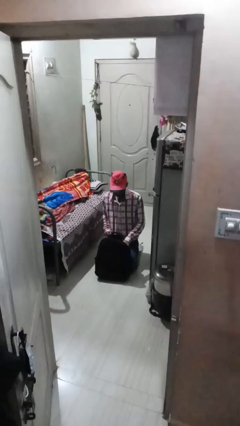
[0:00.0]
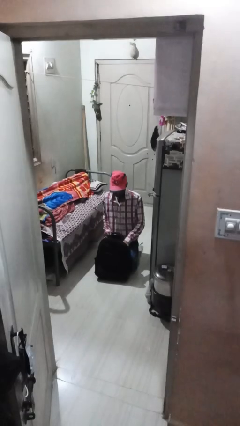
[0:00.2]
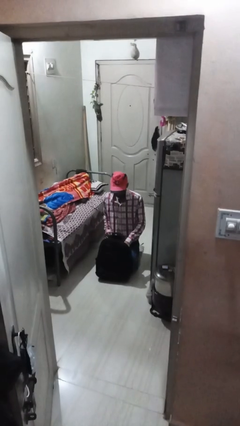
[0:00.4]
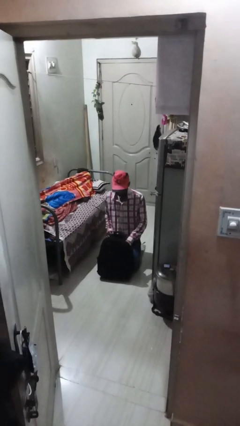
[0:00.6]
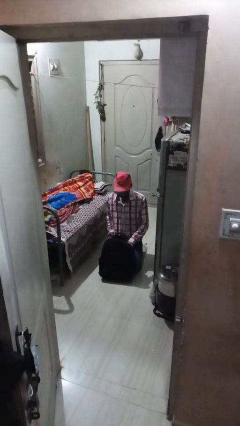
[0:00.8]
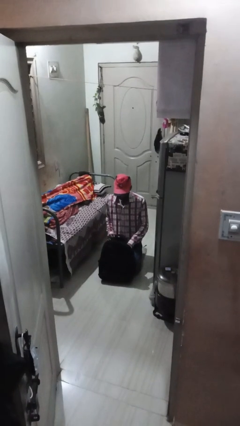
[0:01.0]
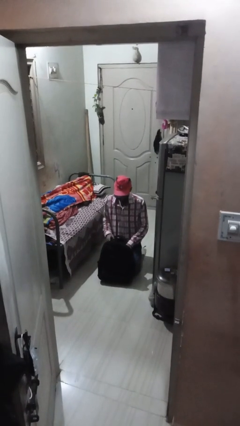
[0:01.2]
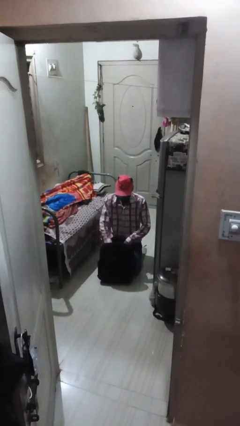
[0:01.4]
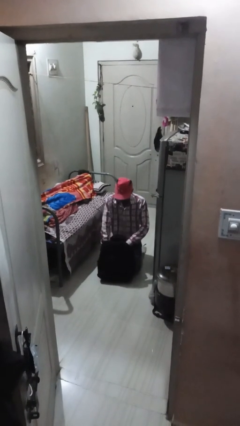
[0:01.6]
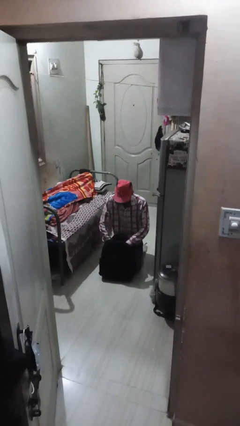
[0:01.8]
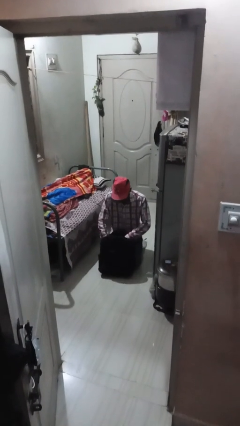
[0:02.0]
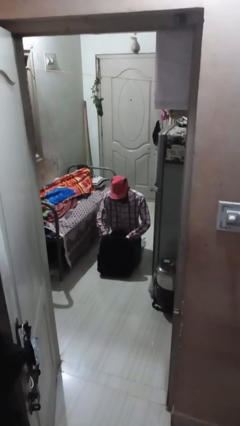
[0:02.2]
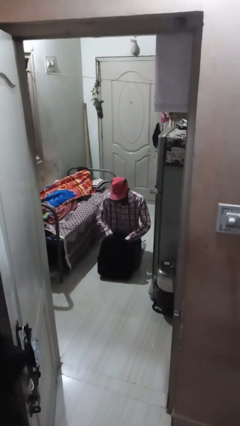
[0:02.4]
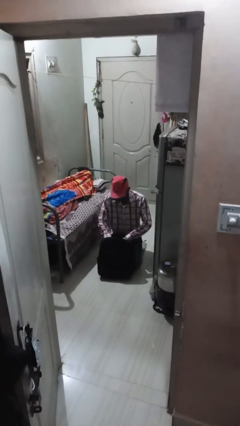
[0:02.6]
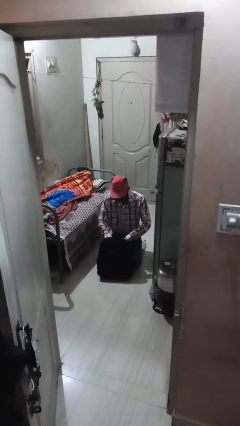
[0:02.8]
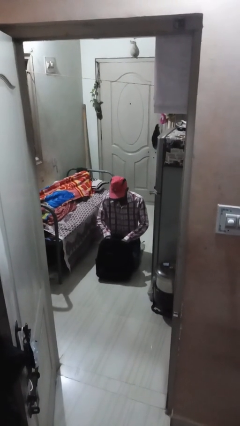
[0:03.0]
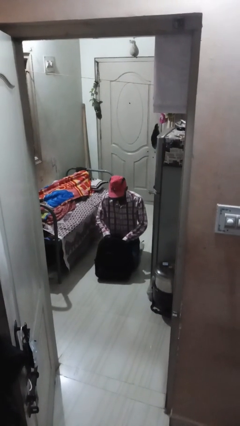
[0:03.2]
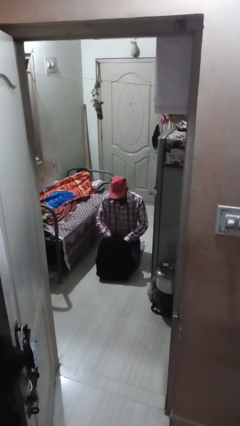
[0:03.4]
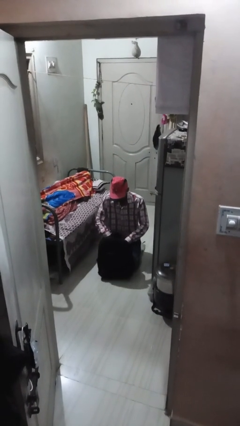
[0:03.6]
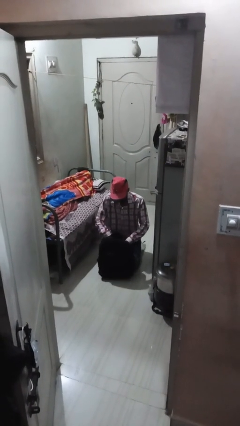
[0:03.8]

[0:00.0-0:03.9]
person searches in backpack

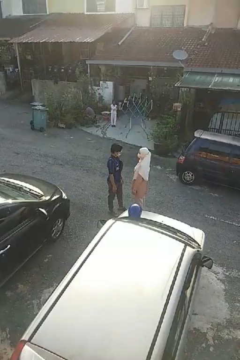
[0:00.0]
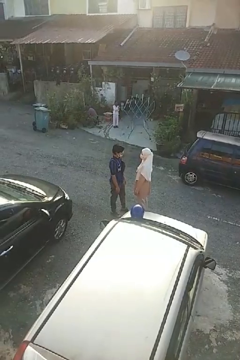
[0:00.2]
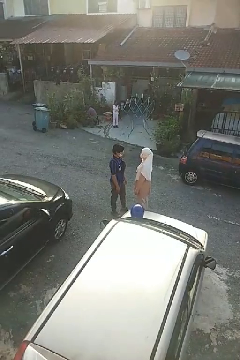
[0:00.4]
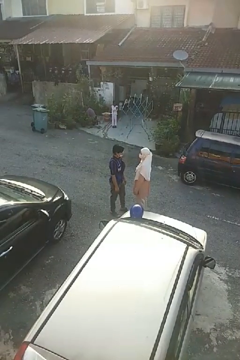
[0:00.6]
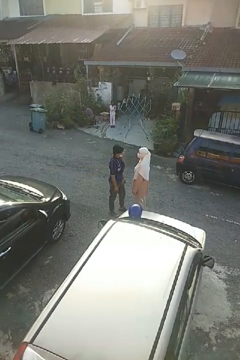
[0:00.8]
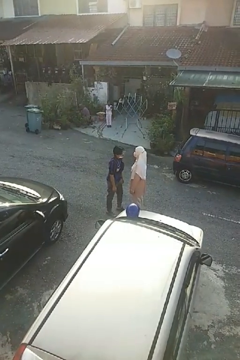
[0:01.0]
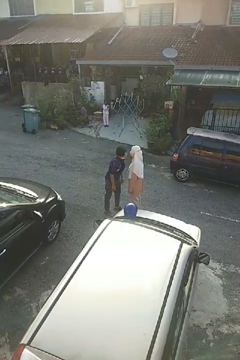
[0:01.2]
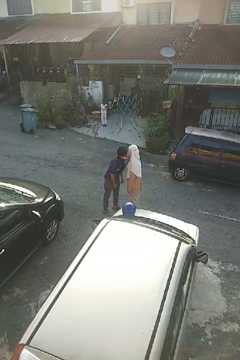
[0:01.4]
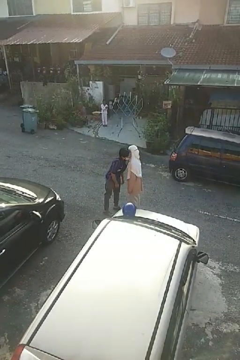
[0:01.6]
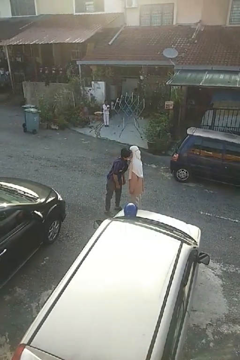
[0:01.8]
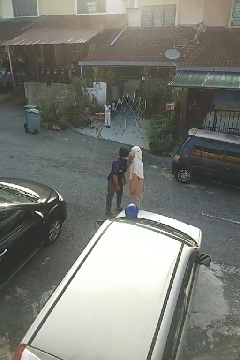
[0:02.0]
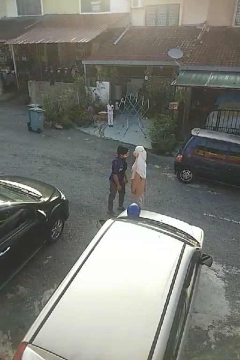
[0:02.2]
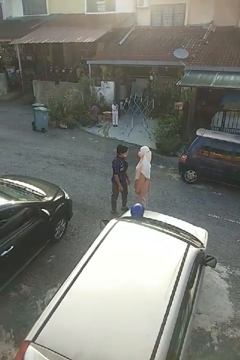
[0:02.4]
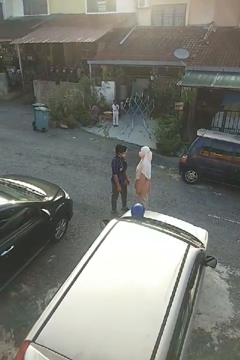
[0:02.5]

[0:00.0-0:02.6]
person kisses cheek of person

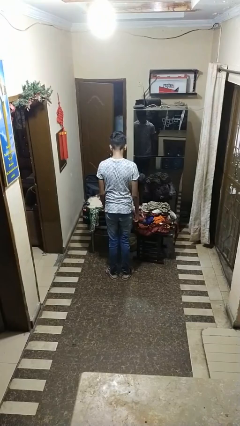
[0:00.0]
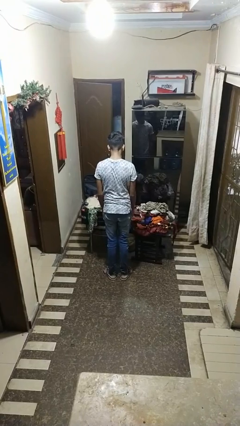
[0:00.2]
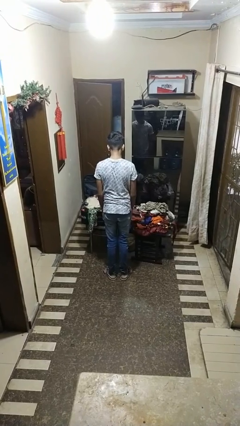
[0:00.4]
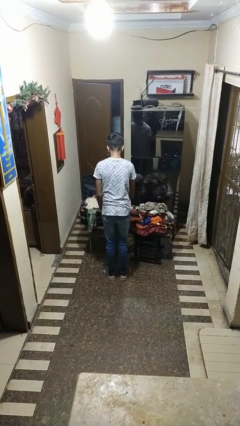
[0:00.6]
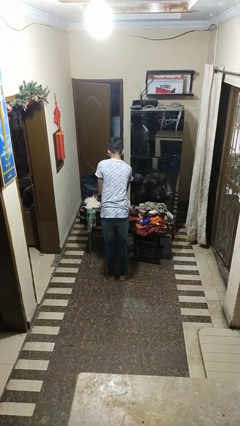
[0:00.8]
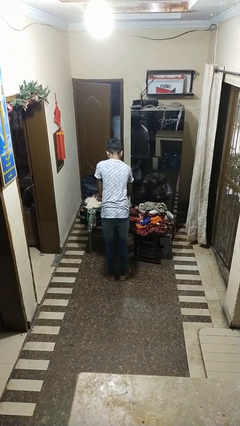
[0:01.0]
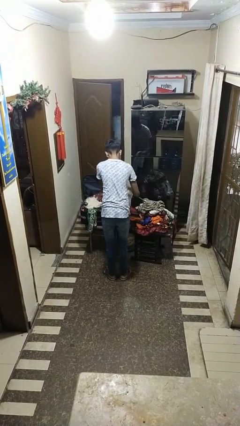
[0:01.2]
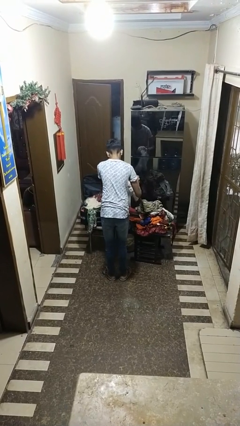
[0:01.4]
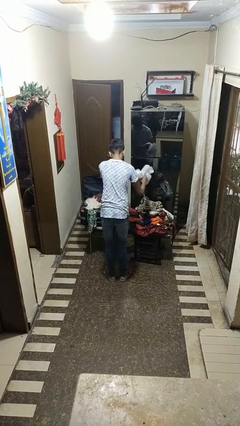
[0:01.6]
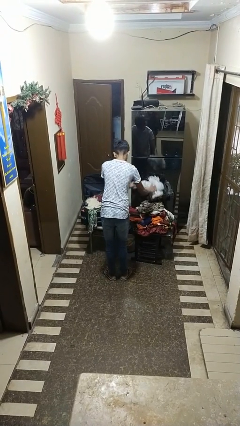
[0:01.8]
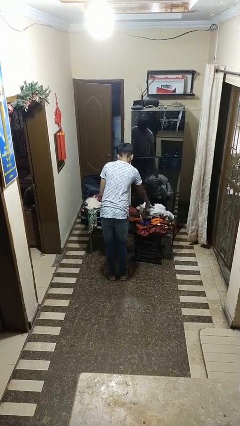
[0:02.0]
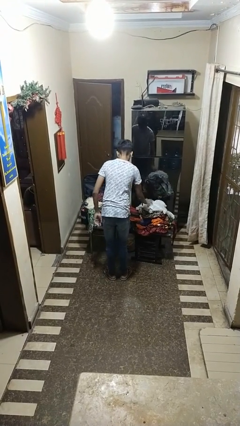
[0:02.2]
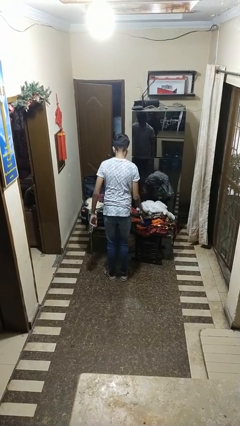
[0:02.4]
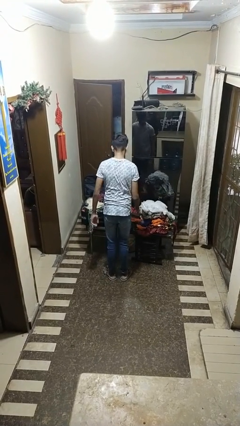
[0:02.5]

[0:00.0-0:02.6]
person unloads clothes from suitcase

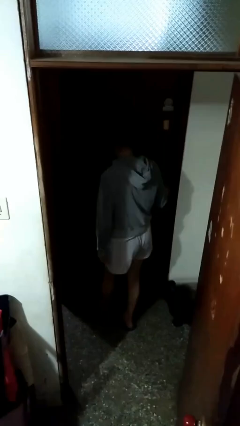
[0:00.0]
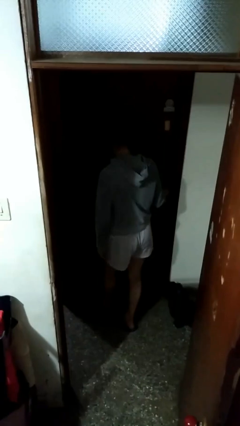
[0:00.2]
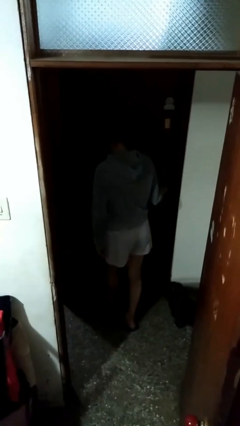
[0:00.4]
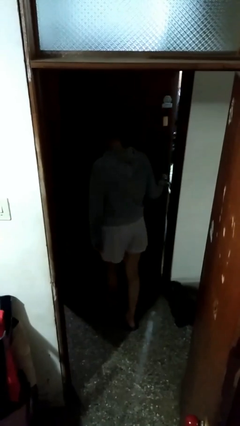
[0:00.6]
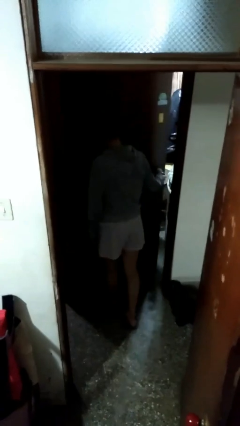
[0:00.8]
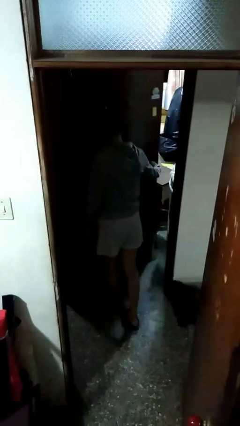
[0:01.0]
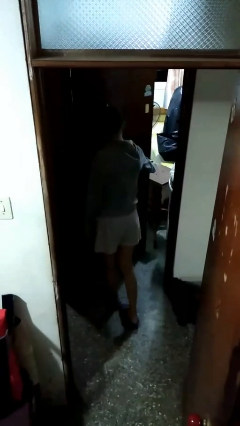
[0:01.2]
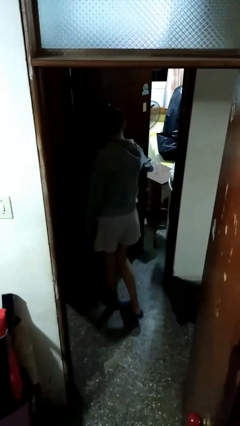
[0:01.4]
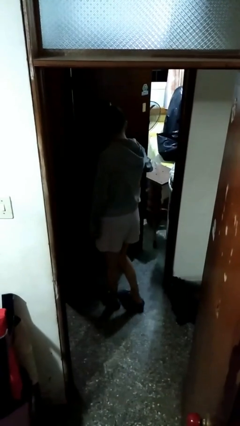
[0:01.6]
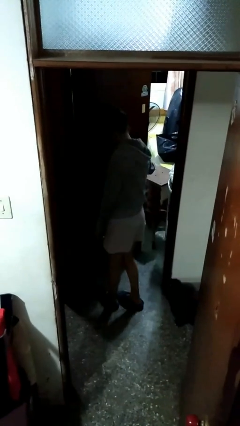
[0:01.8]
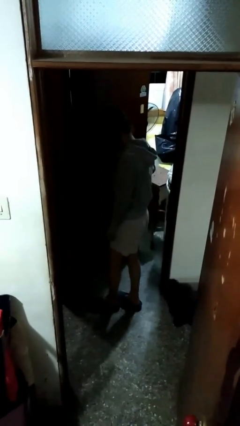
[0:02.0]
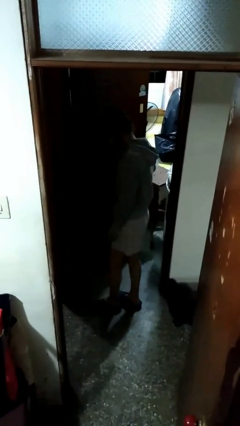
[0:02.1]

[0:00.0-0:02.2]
person opens facility door

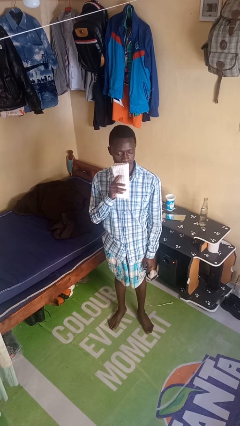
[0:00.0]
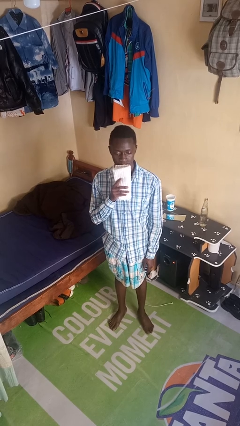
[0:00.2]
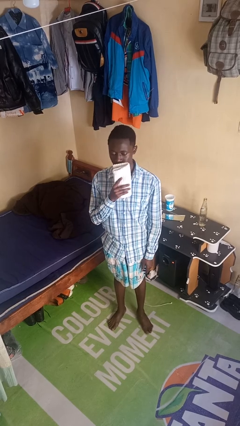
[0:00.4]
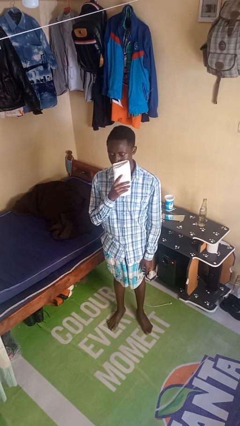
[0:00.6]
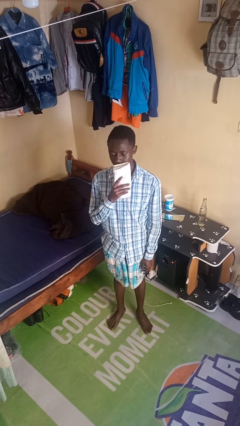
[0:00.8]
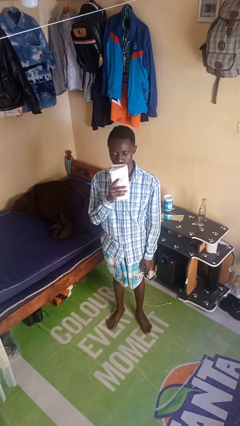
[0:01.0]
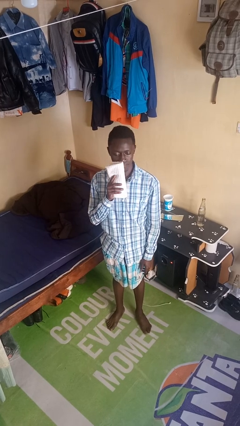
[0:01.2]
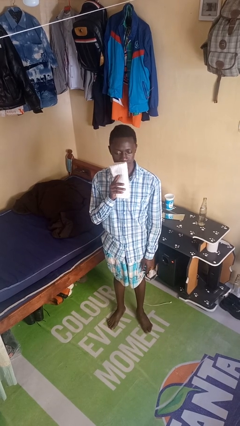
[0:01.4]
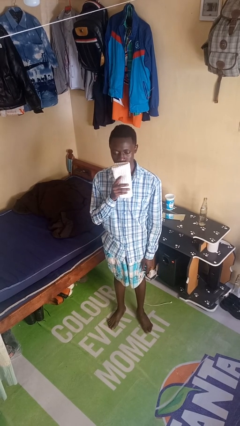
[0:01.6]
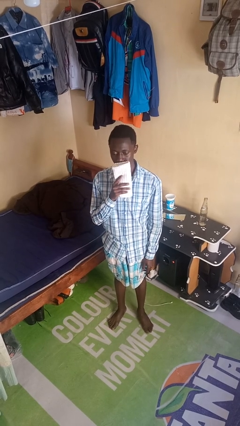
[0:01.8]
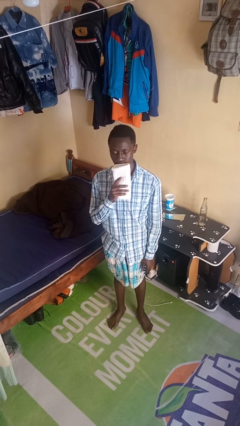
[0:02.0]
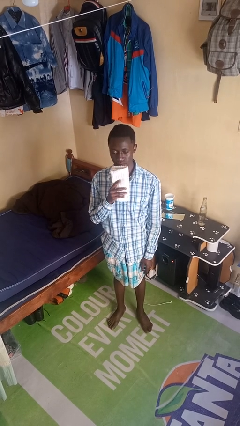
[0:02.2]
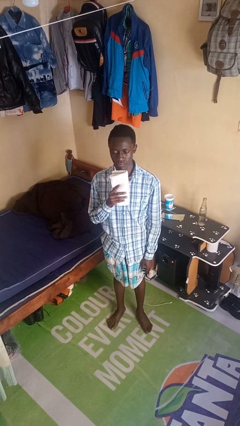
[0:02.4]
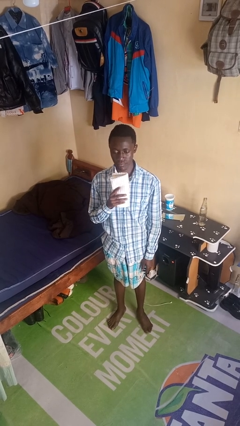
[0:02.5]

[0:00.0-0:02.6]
person wipes mouth with napkin

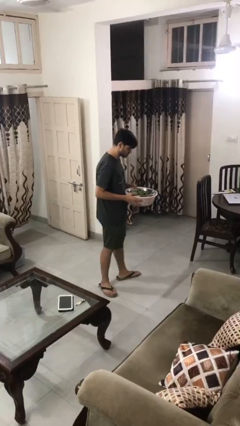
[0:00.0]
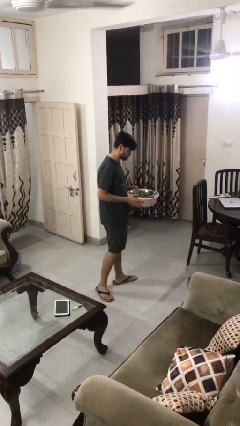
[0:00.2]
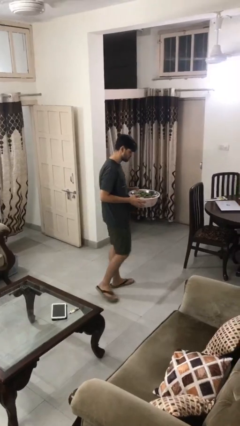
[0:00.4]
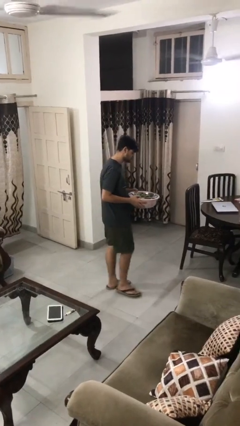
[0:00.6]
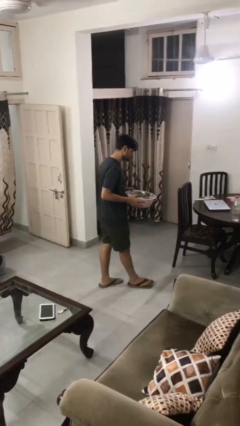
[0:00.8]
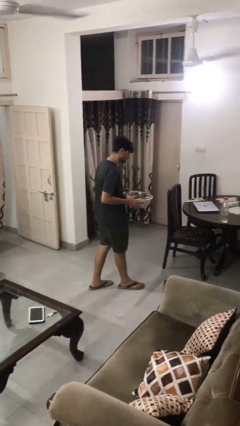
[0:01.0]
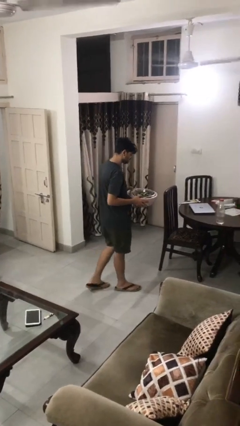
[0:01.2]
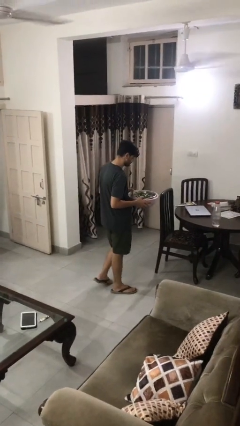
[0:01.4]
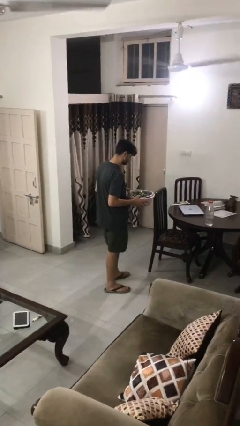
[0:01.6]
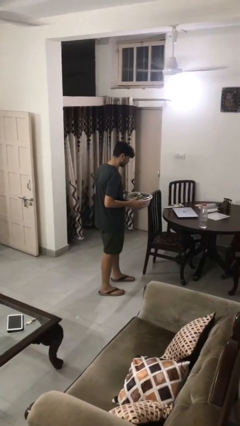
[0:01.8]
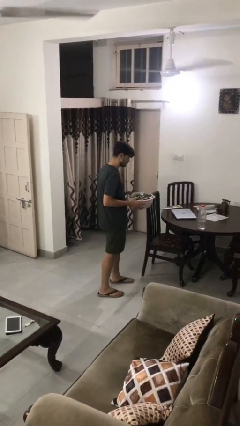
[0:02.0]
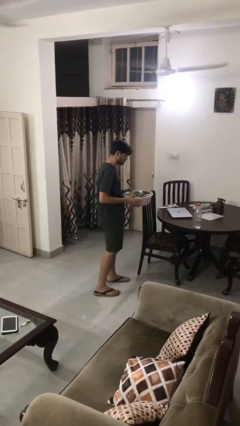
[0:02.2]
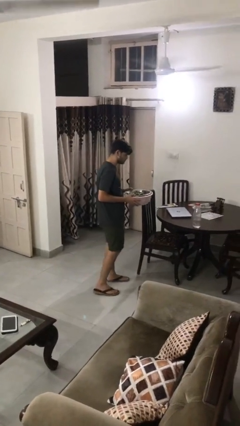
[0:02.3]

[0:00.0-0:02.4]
person carries groceries

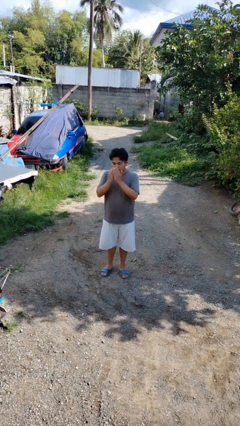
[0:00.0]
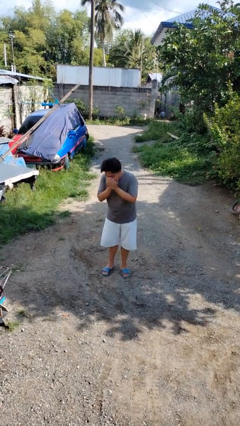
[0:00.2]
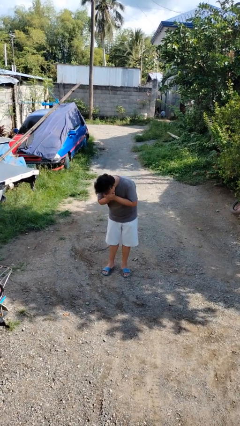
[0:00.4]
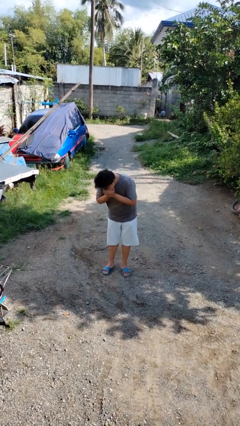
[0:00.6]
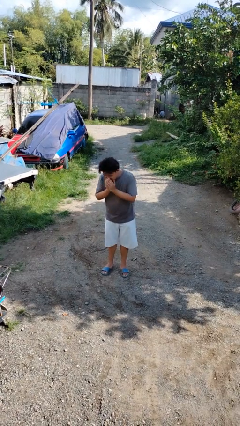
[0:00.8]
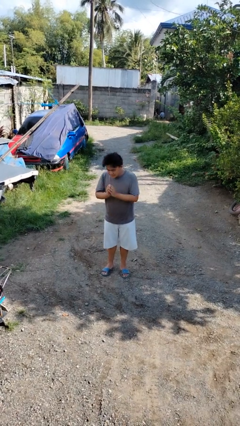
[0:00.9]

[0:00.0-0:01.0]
person sneezes into hand

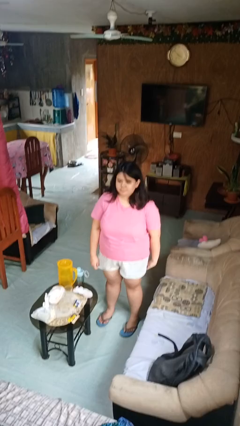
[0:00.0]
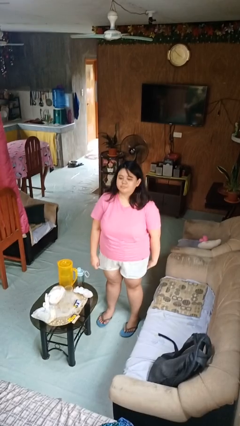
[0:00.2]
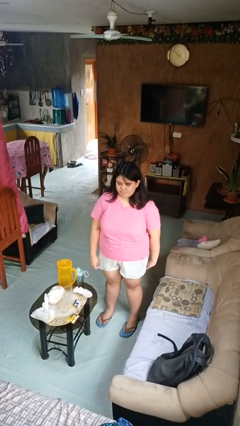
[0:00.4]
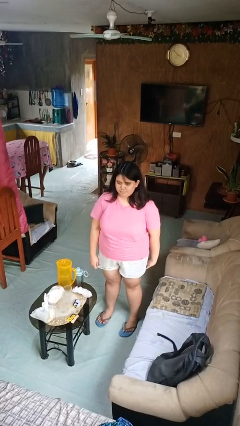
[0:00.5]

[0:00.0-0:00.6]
person nods head
